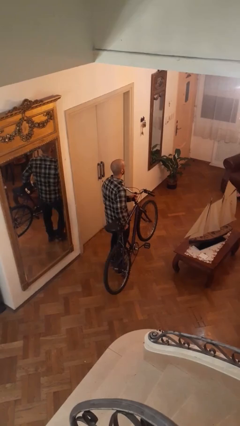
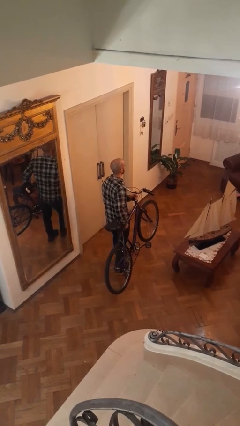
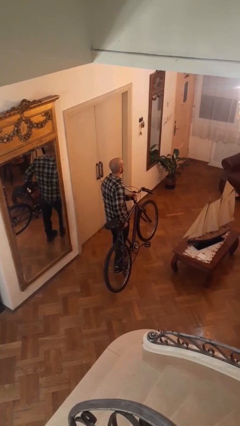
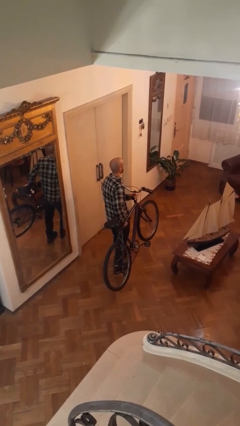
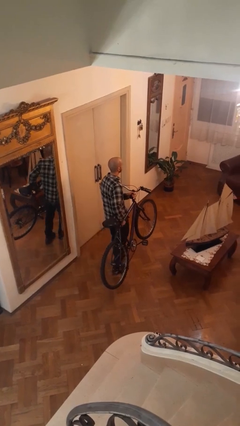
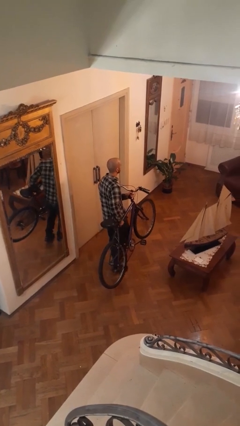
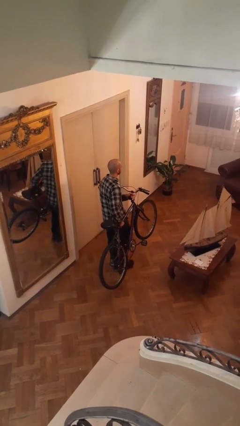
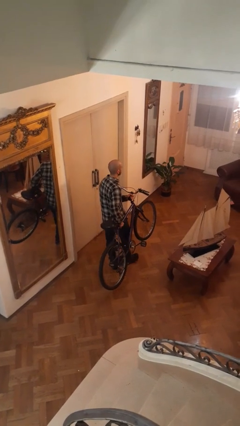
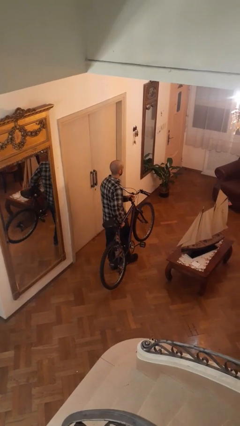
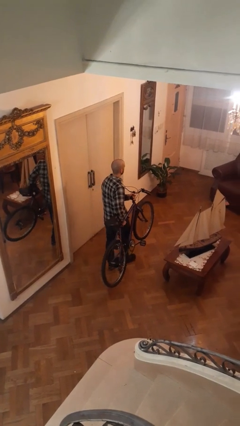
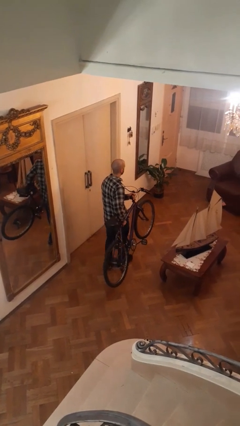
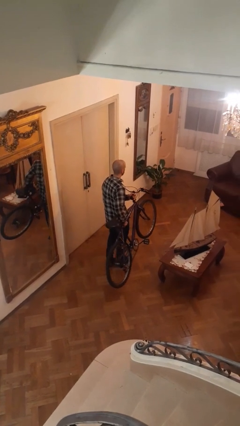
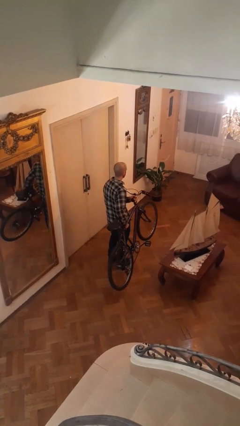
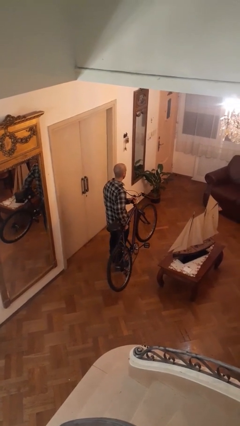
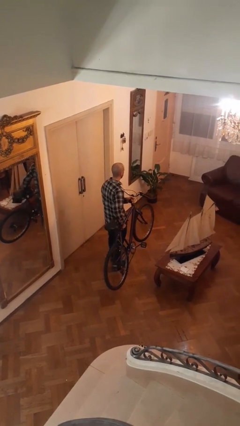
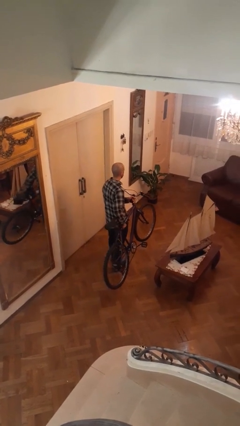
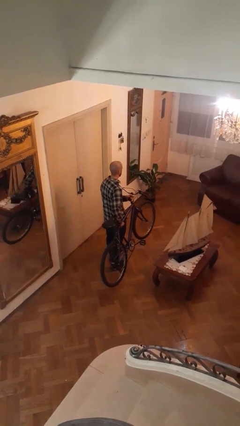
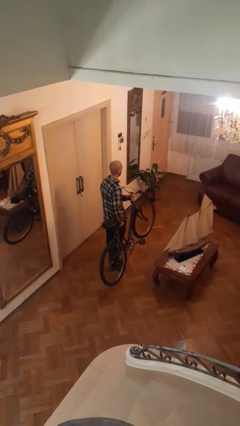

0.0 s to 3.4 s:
person carries bicycle

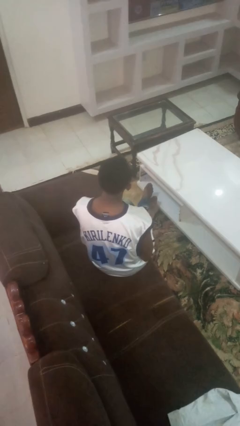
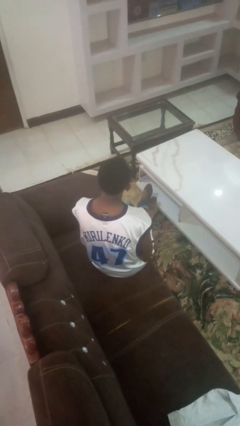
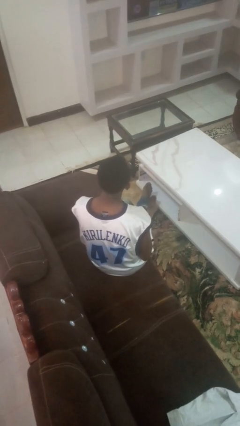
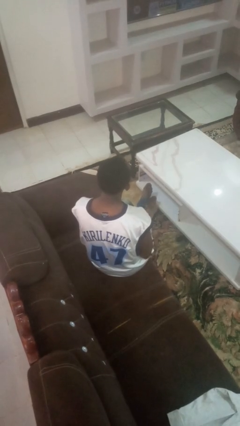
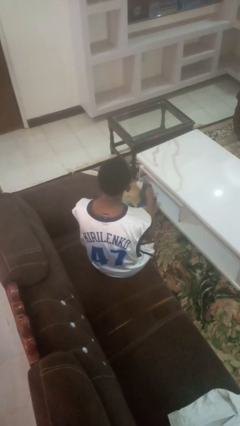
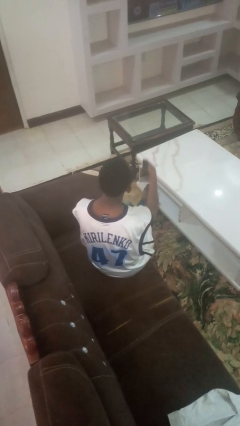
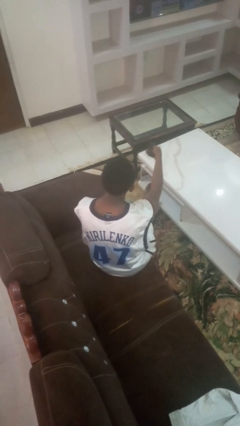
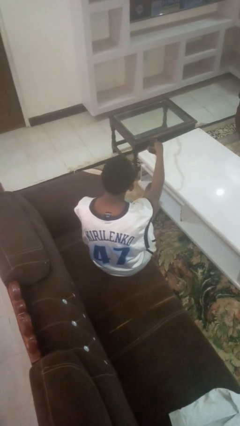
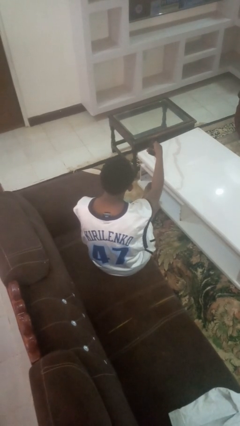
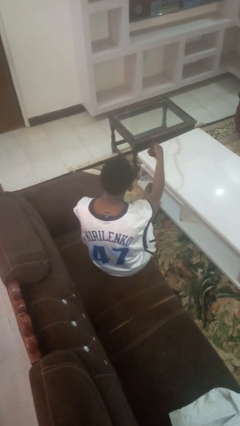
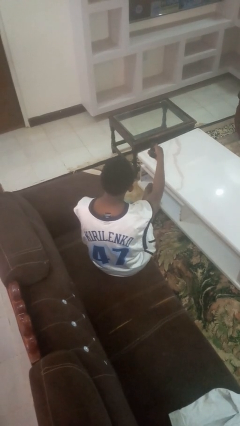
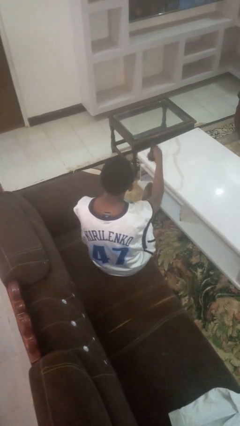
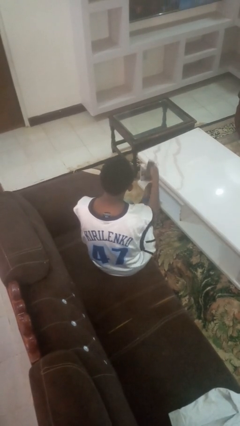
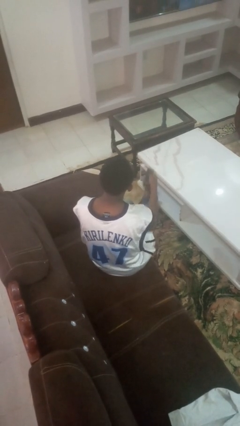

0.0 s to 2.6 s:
person uses television remote

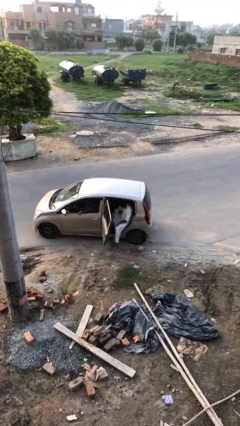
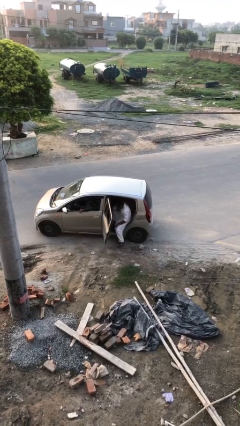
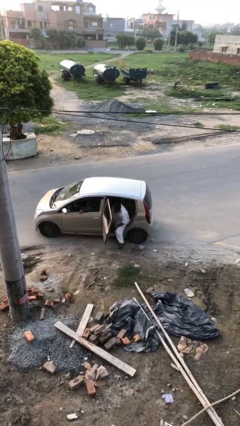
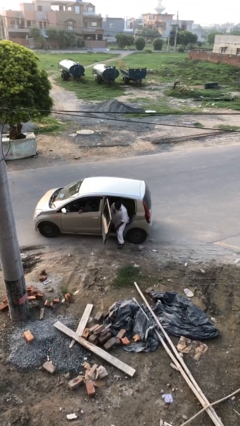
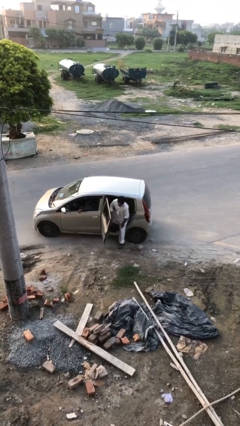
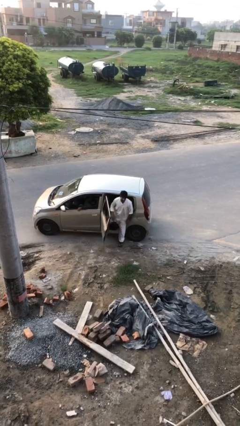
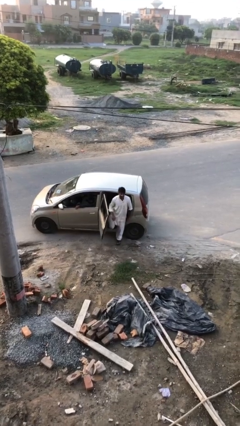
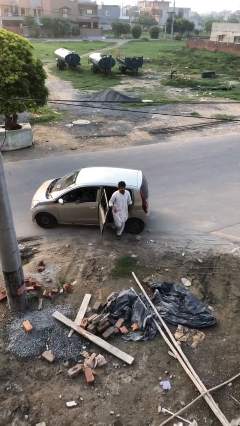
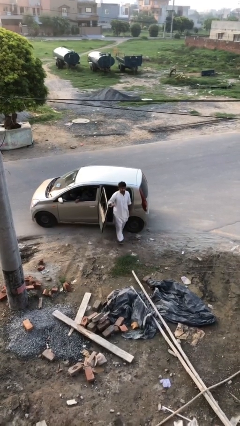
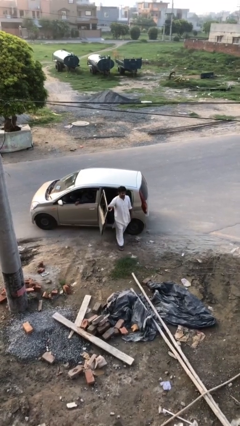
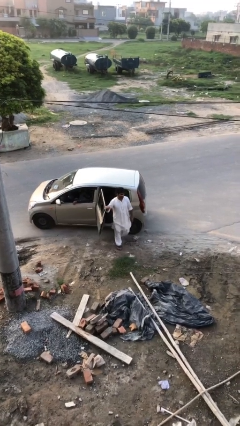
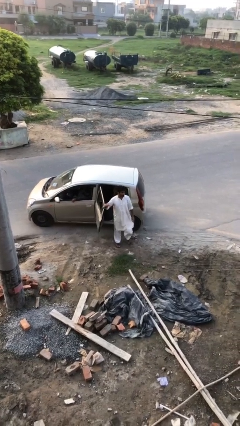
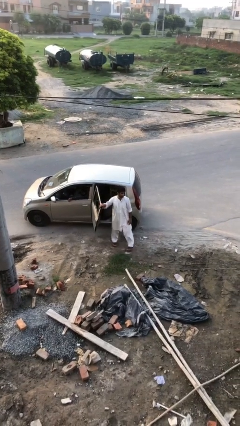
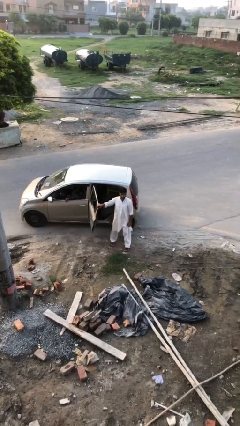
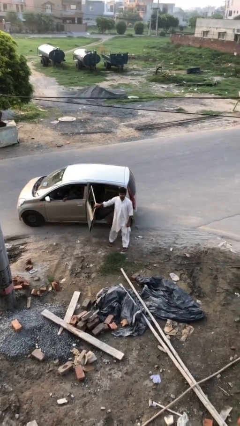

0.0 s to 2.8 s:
person exits car

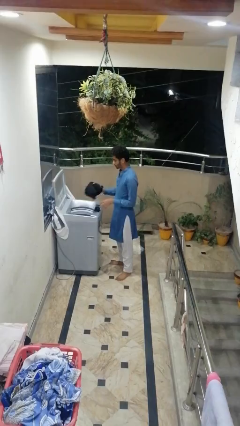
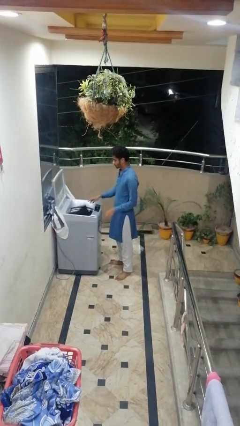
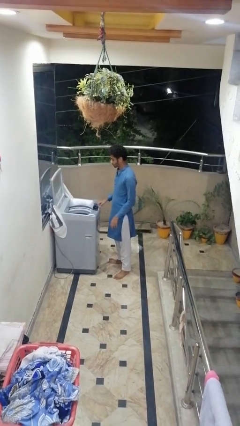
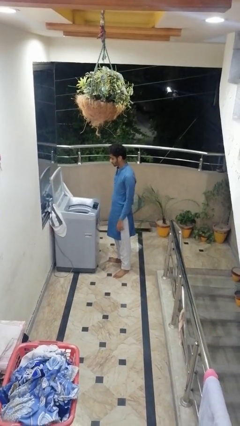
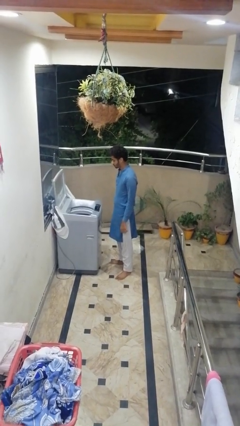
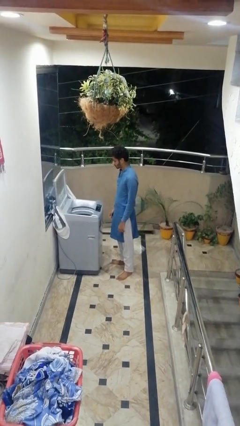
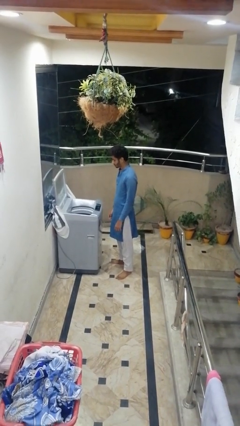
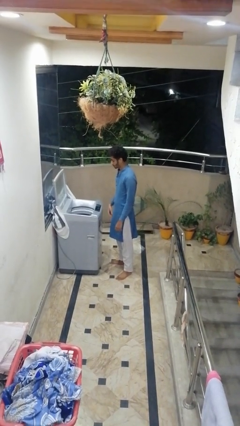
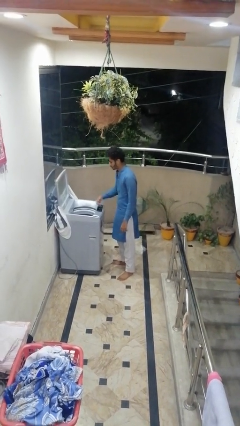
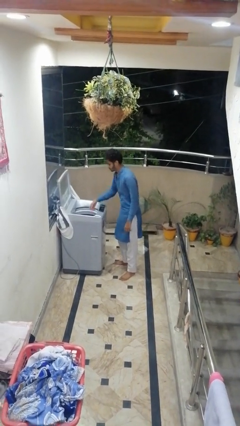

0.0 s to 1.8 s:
person loads clotheswasher

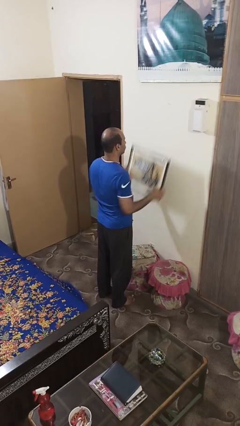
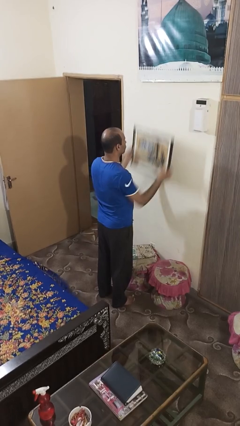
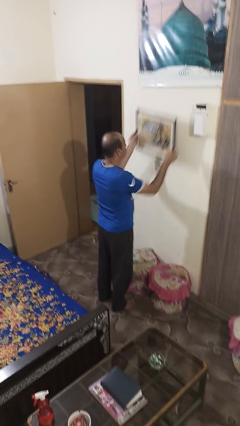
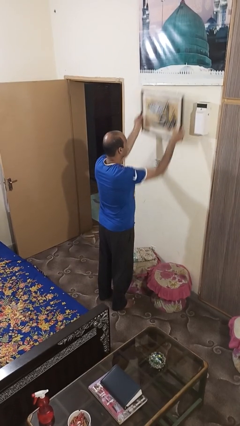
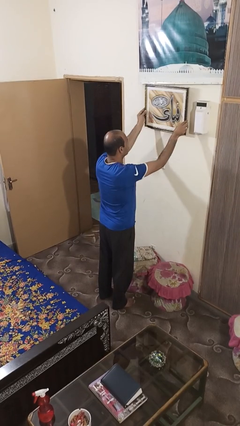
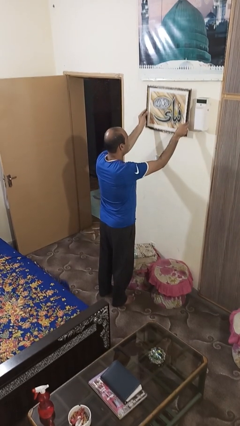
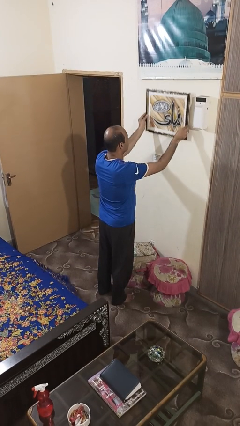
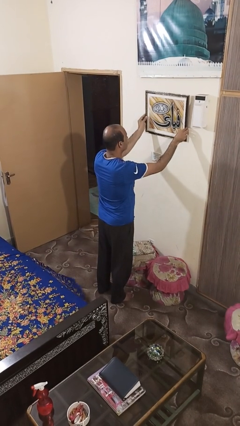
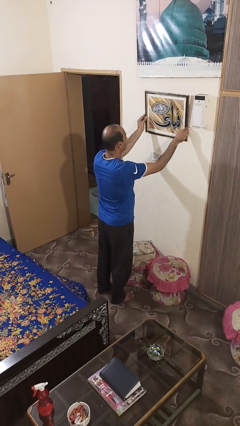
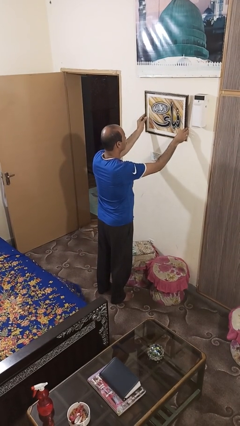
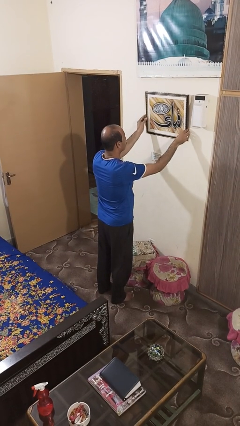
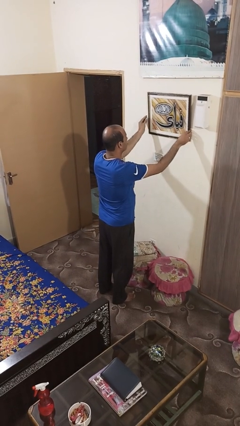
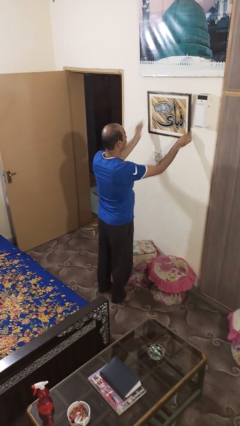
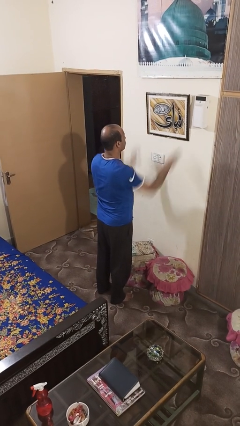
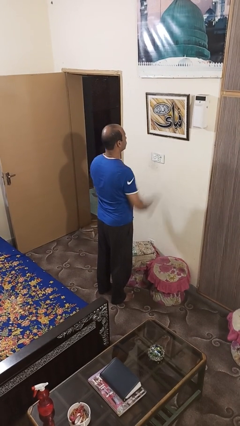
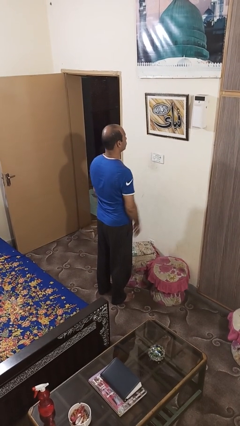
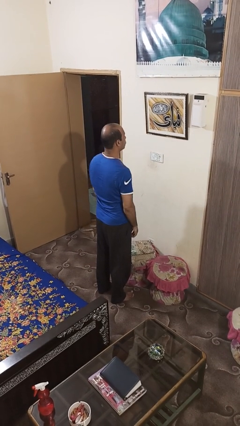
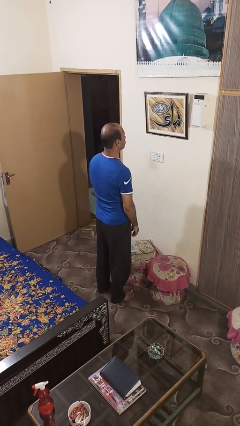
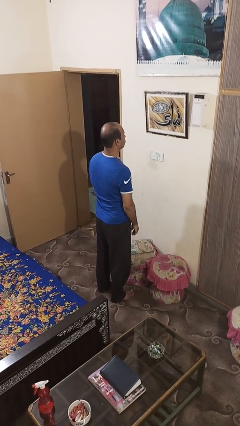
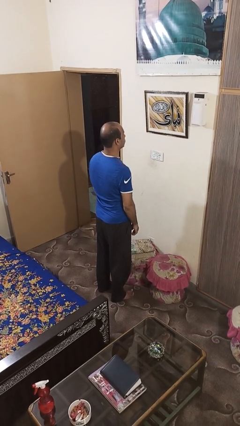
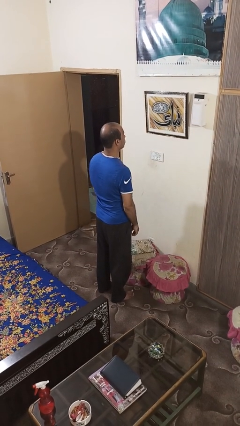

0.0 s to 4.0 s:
person puts up picture frame

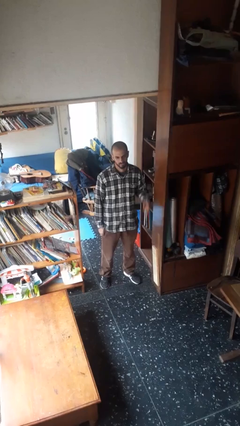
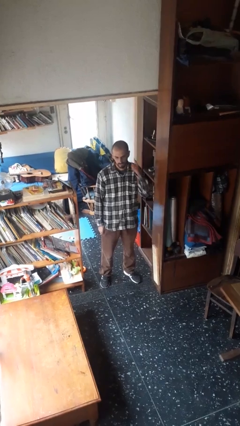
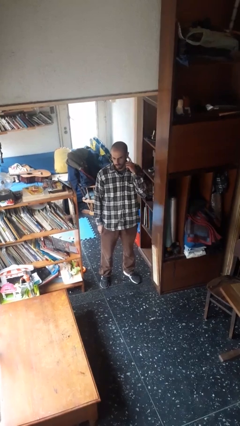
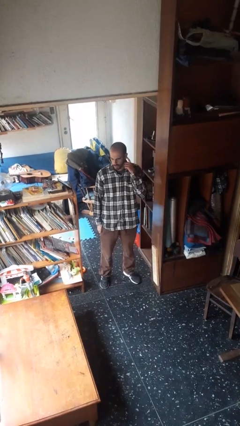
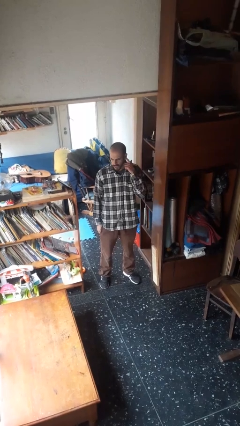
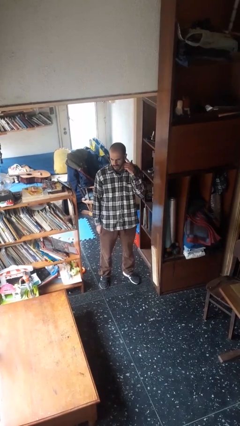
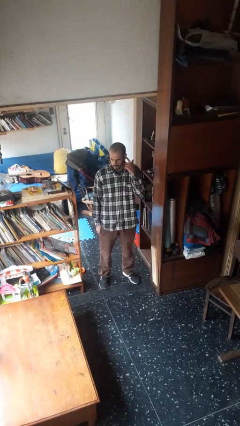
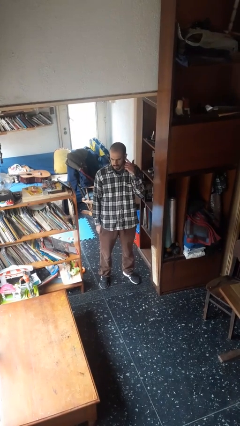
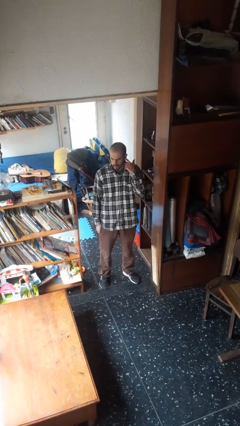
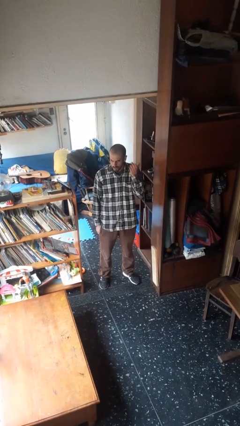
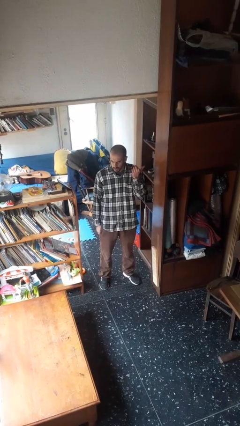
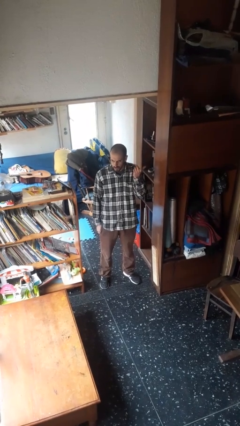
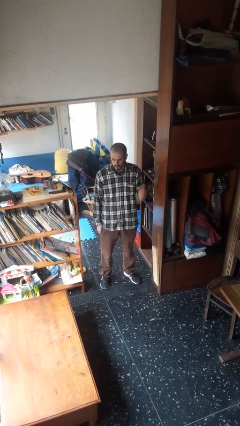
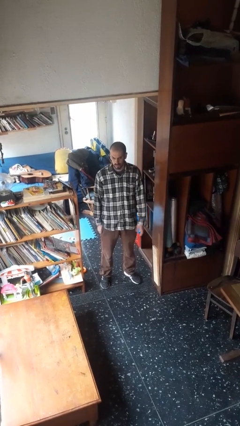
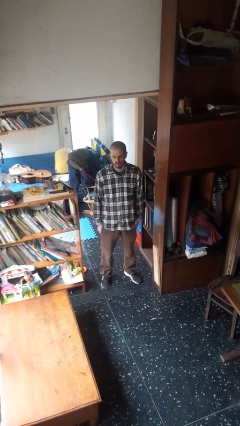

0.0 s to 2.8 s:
person gestures listen closely
